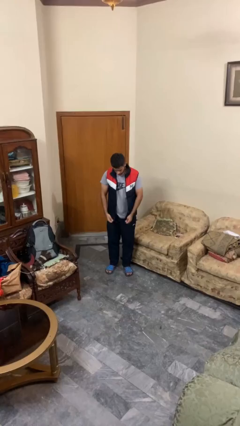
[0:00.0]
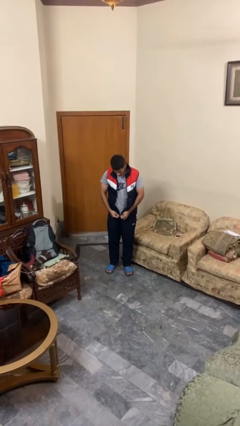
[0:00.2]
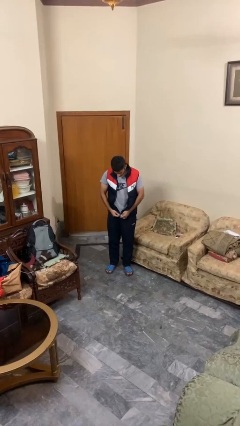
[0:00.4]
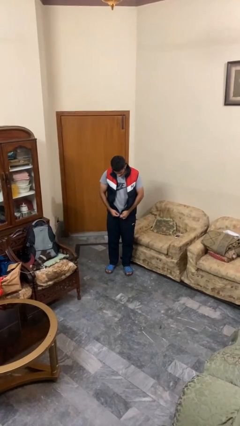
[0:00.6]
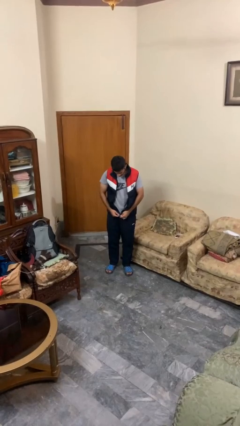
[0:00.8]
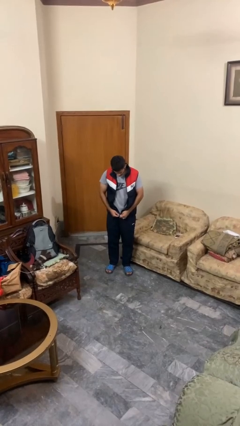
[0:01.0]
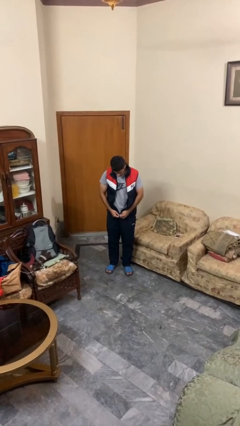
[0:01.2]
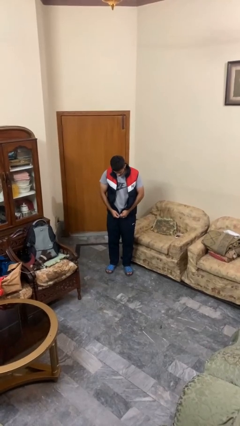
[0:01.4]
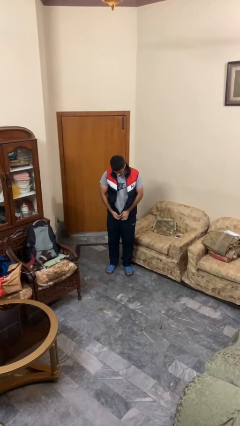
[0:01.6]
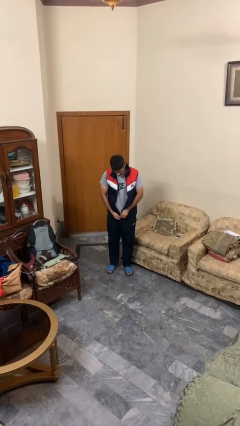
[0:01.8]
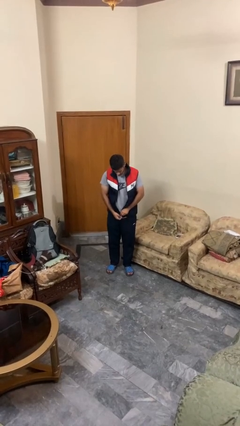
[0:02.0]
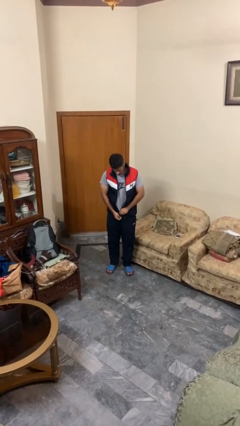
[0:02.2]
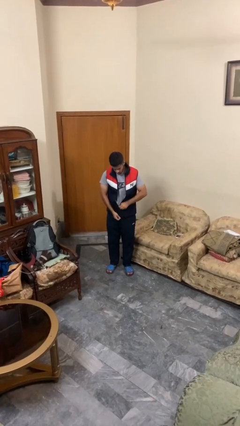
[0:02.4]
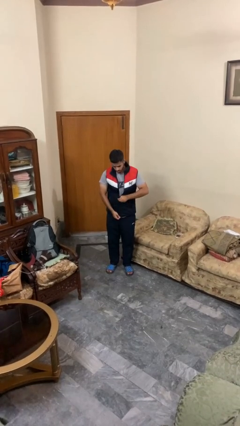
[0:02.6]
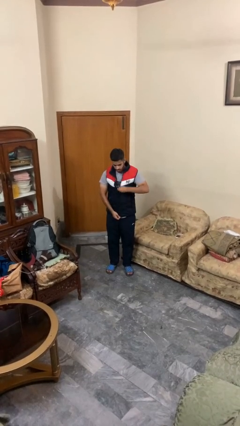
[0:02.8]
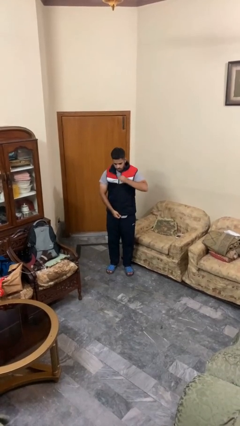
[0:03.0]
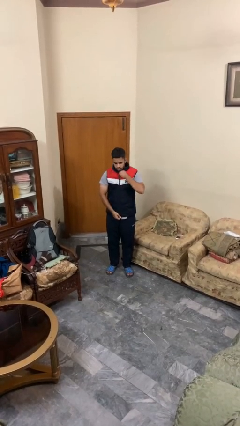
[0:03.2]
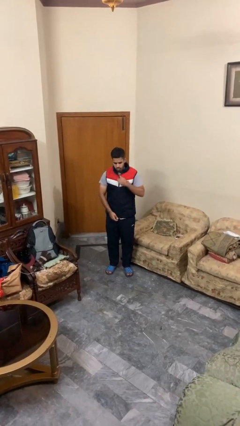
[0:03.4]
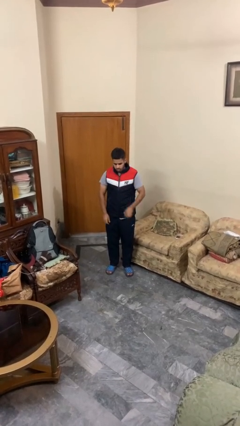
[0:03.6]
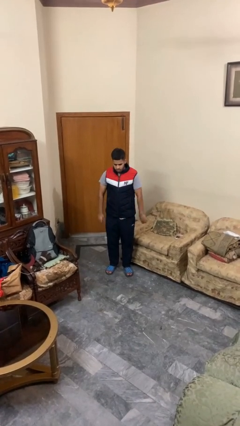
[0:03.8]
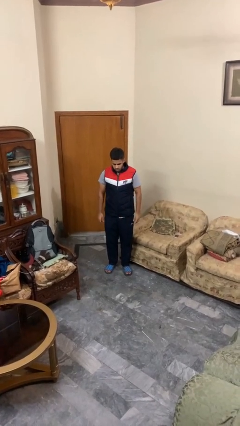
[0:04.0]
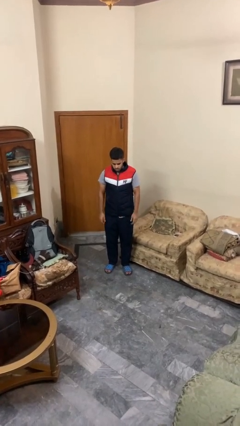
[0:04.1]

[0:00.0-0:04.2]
person zips up jacket

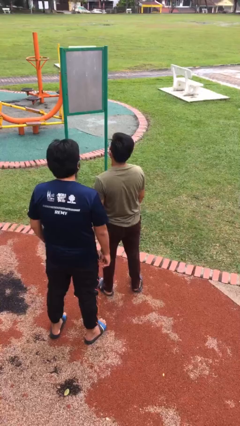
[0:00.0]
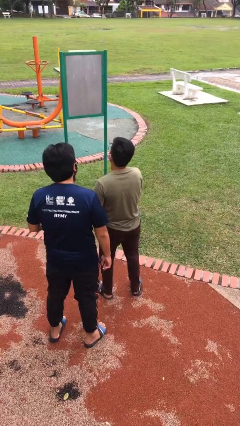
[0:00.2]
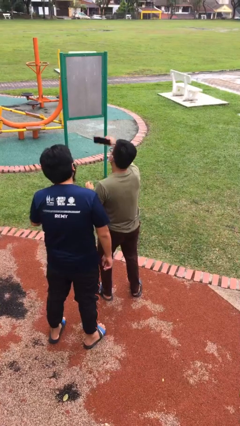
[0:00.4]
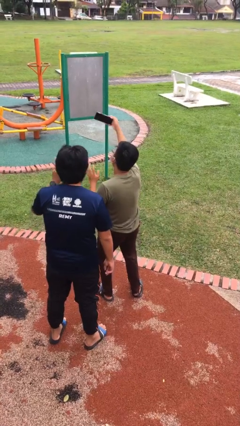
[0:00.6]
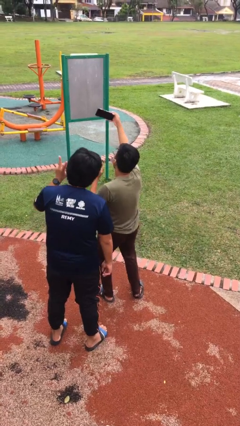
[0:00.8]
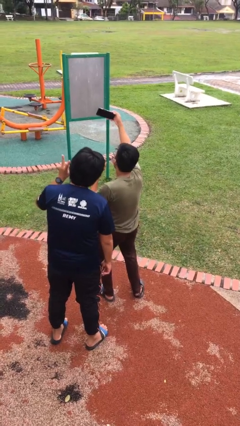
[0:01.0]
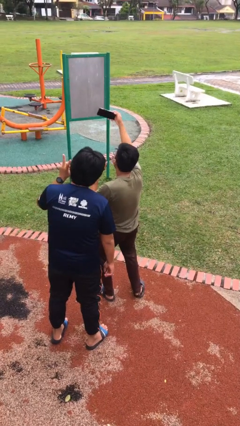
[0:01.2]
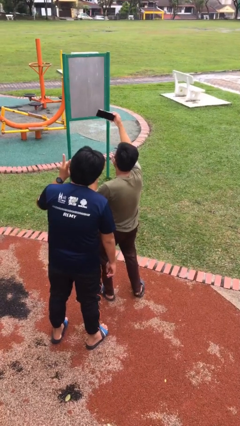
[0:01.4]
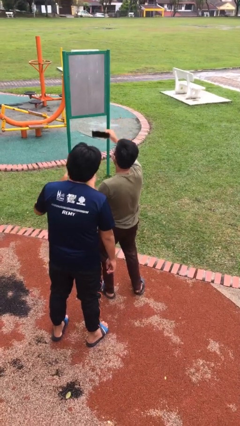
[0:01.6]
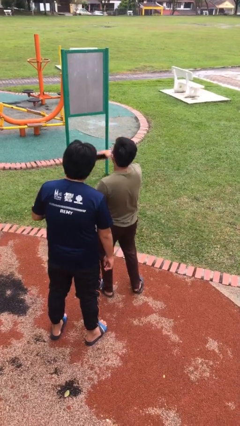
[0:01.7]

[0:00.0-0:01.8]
person takes selfie with person

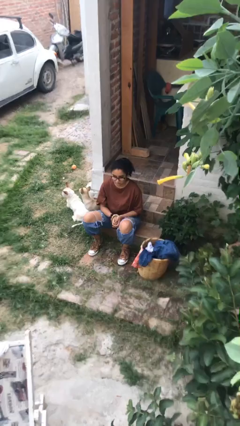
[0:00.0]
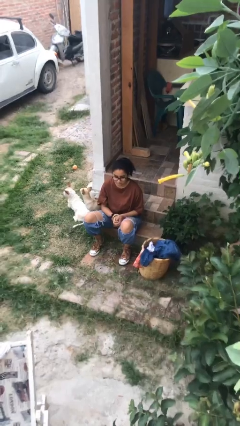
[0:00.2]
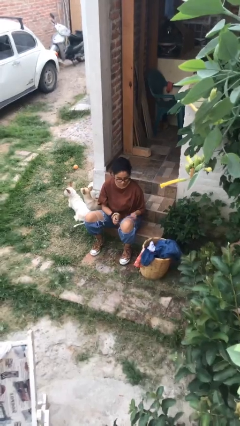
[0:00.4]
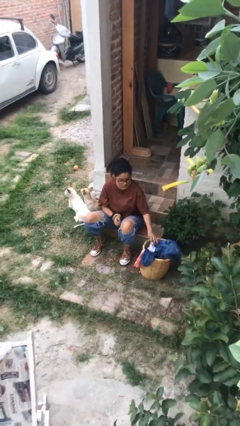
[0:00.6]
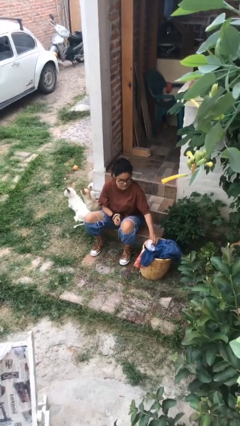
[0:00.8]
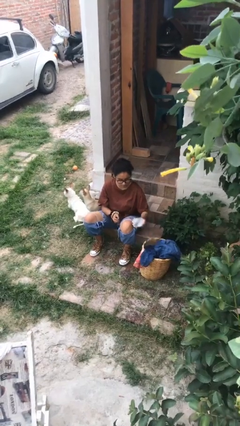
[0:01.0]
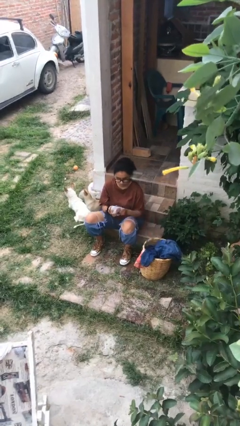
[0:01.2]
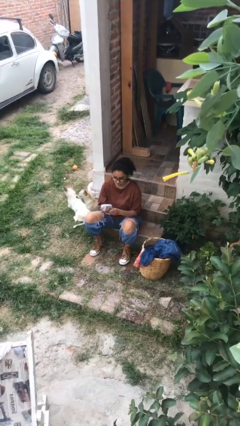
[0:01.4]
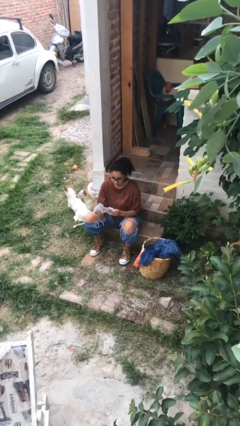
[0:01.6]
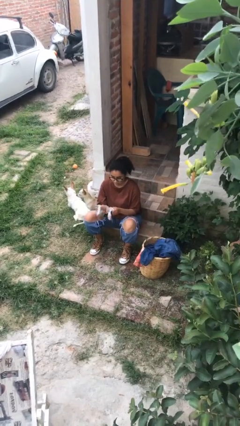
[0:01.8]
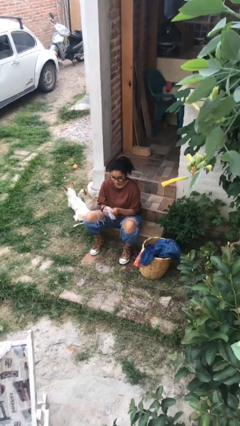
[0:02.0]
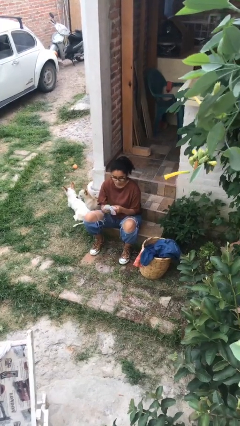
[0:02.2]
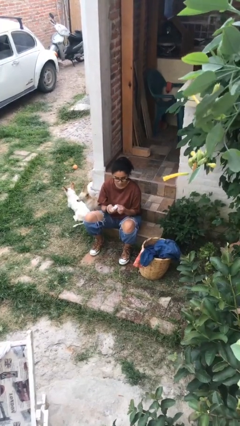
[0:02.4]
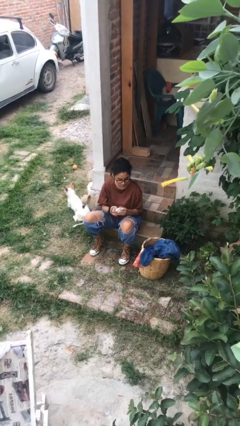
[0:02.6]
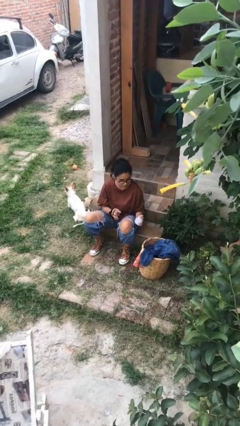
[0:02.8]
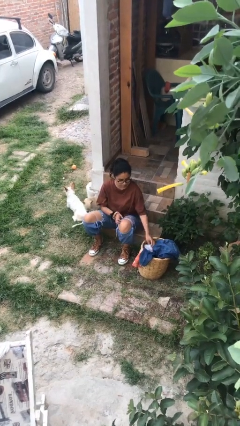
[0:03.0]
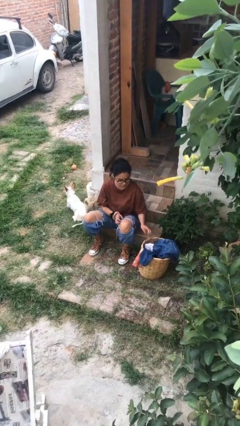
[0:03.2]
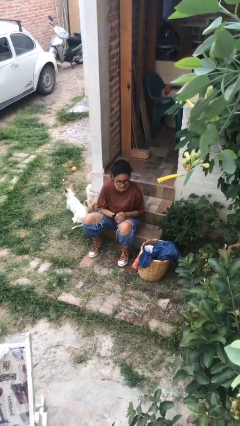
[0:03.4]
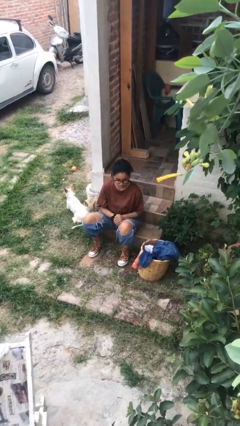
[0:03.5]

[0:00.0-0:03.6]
person folds socks

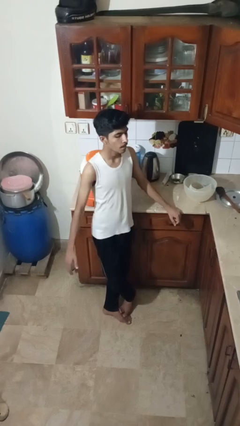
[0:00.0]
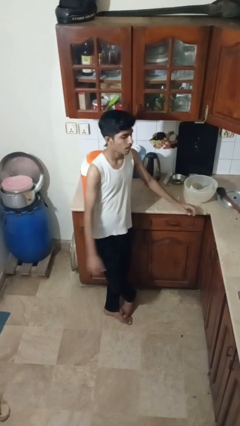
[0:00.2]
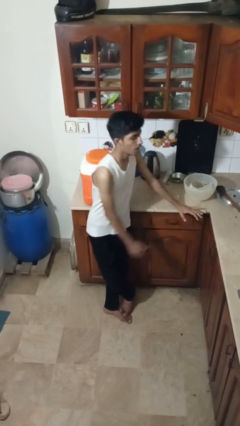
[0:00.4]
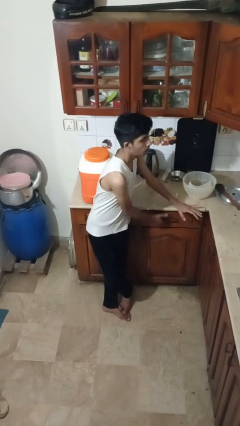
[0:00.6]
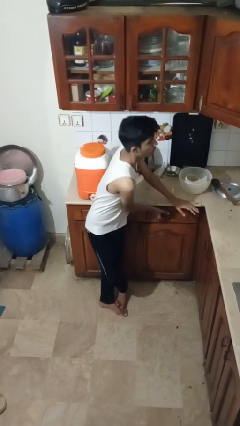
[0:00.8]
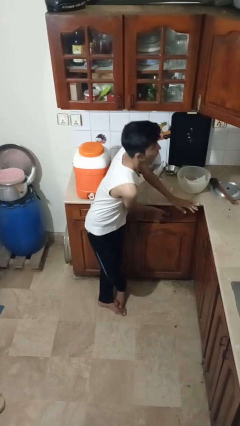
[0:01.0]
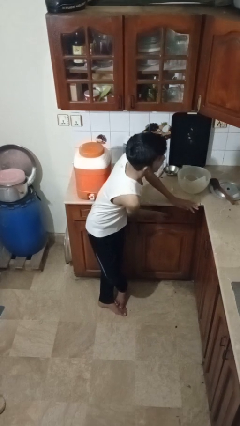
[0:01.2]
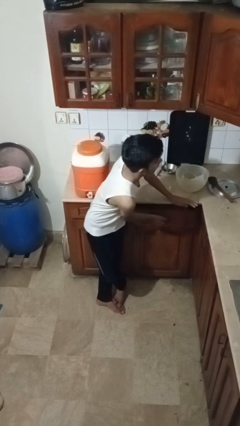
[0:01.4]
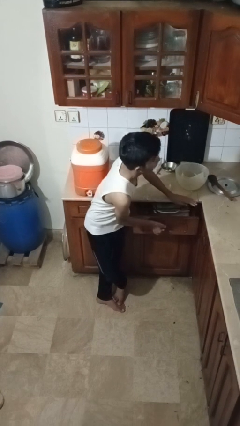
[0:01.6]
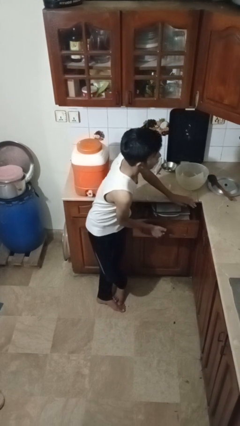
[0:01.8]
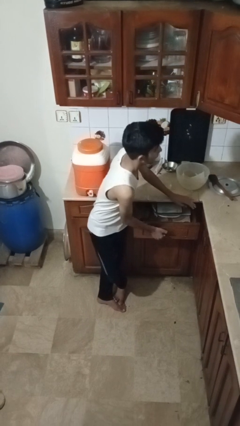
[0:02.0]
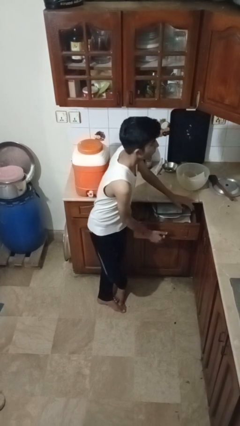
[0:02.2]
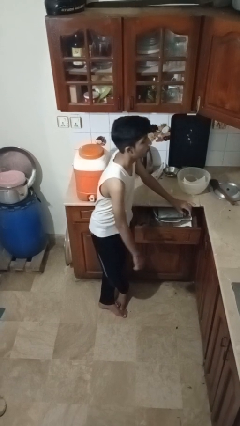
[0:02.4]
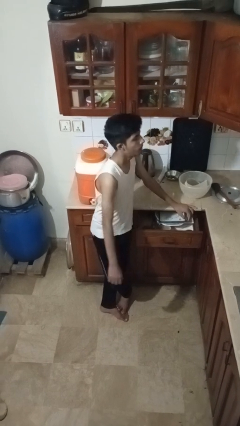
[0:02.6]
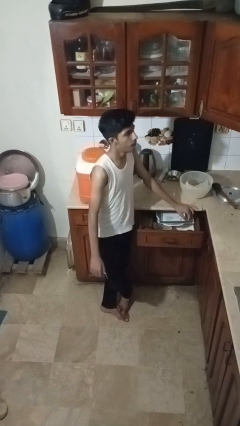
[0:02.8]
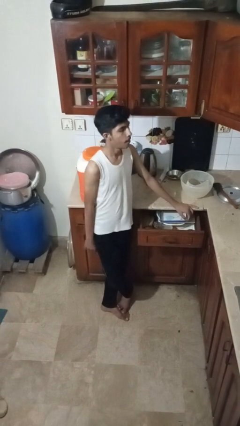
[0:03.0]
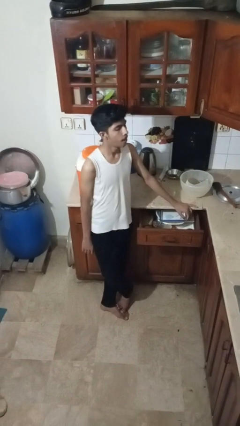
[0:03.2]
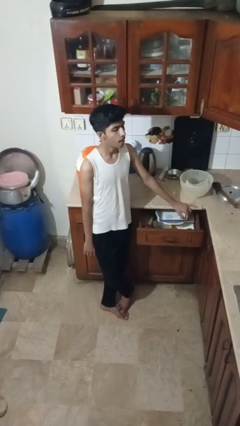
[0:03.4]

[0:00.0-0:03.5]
person opens kitchen drawer

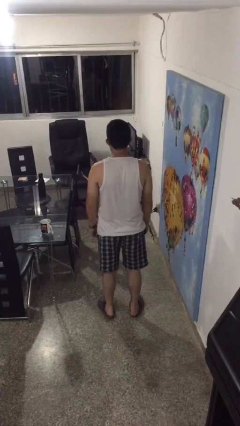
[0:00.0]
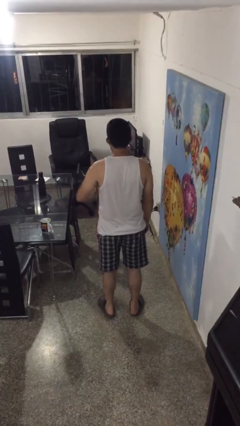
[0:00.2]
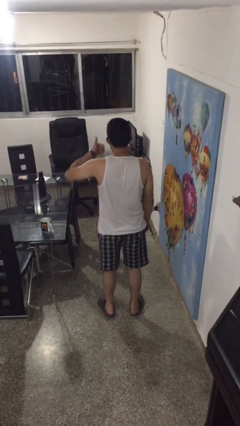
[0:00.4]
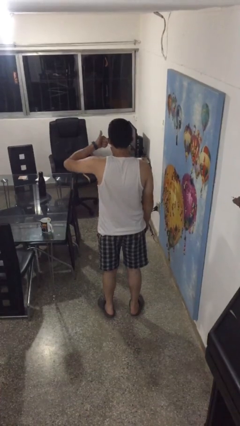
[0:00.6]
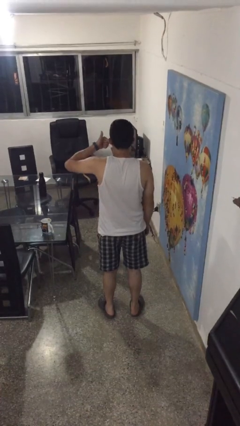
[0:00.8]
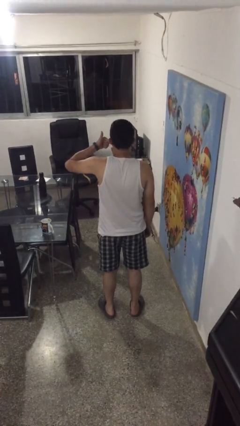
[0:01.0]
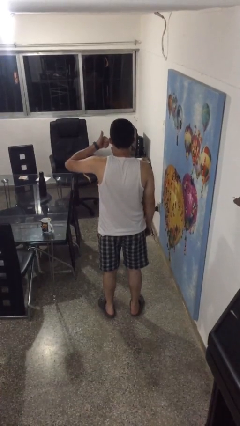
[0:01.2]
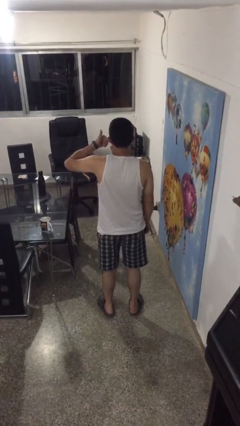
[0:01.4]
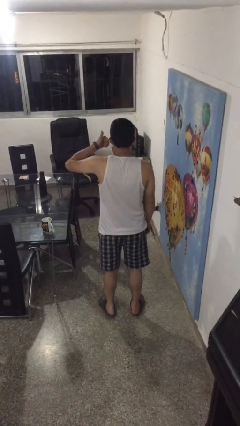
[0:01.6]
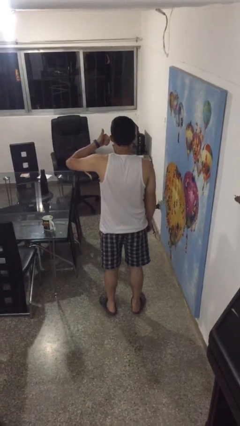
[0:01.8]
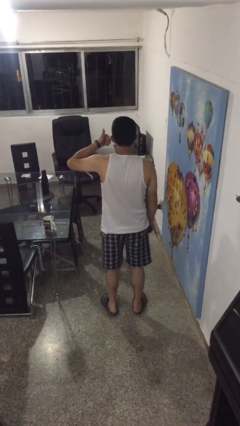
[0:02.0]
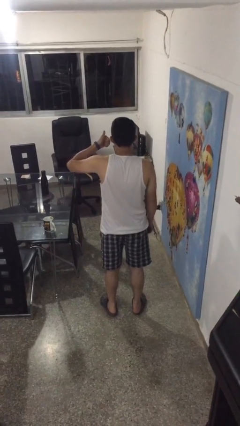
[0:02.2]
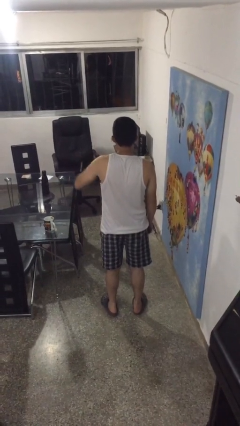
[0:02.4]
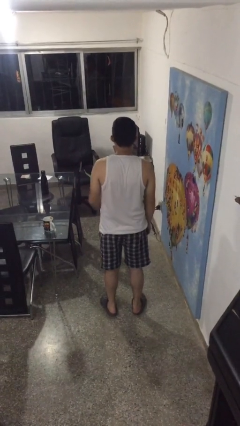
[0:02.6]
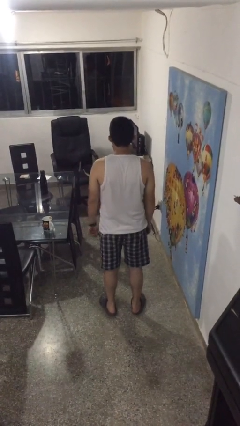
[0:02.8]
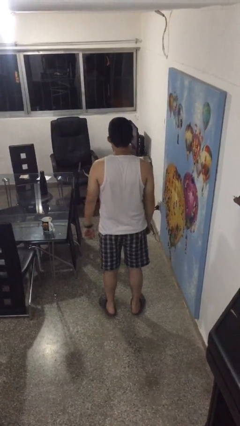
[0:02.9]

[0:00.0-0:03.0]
person gestures thumbs up

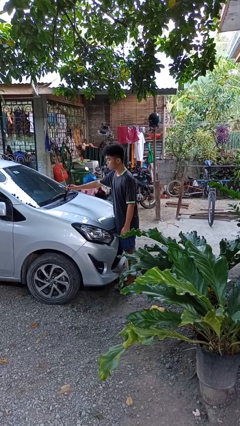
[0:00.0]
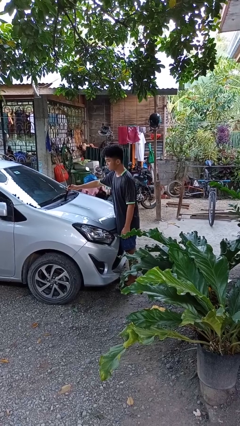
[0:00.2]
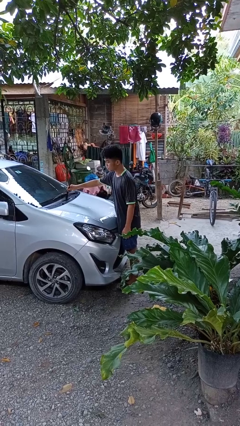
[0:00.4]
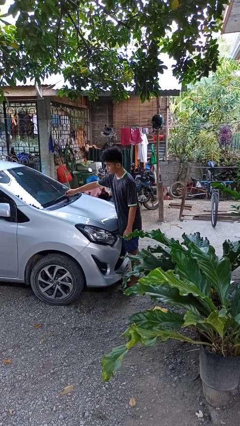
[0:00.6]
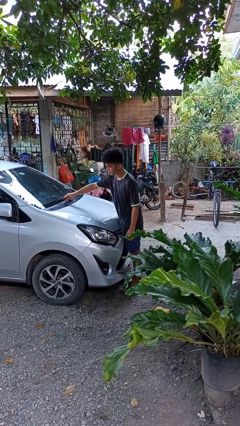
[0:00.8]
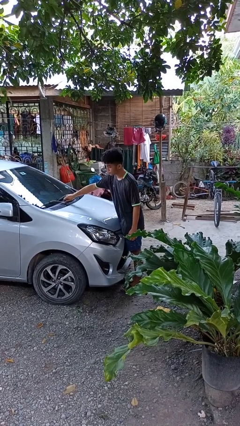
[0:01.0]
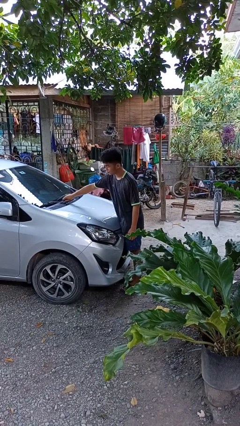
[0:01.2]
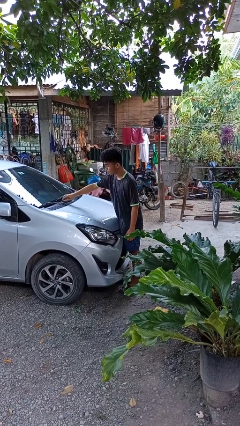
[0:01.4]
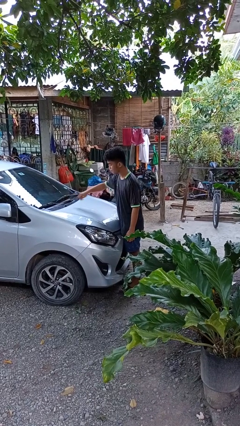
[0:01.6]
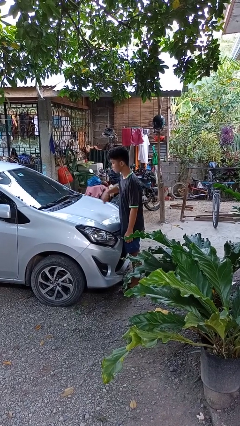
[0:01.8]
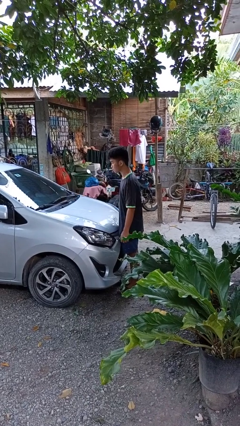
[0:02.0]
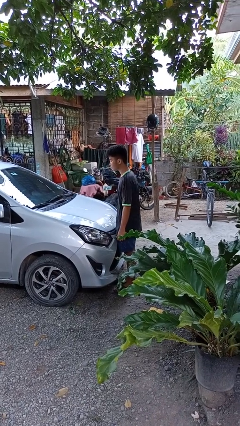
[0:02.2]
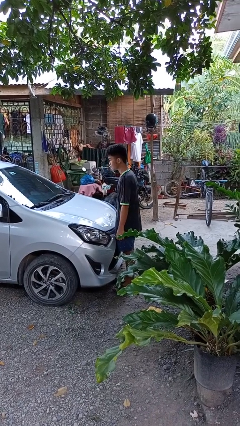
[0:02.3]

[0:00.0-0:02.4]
person flips down car wipers
